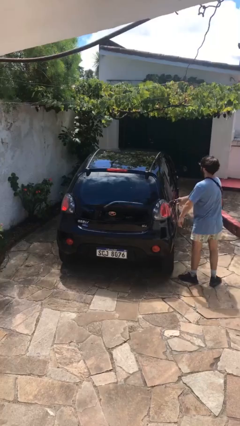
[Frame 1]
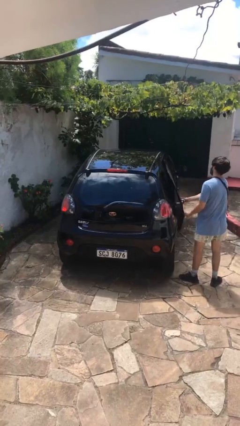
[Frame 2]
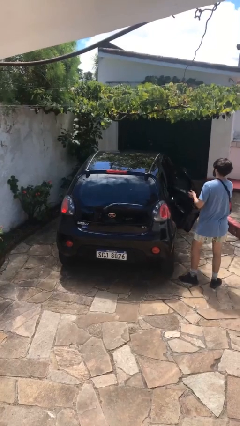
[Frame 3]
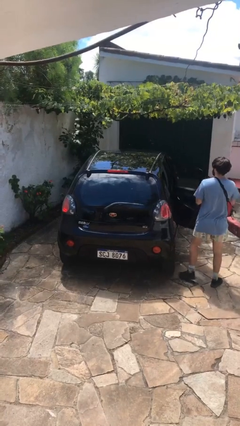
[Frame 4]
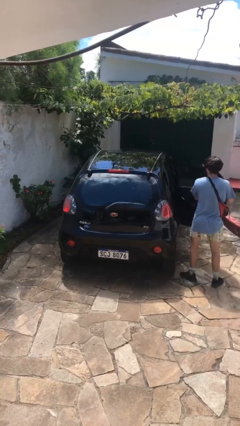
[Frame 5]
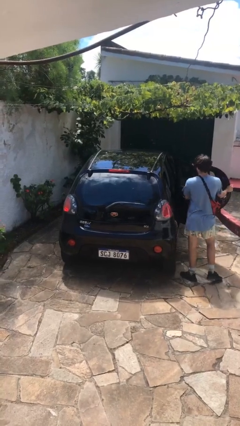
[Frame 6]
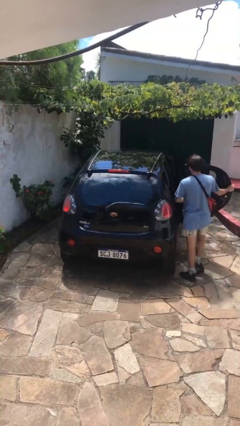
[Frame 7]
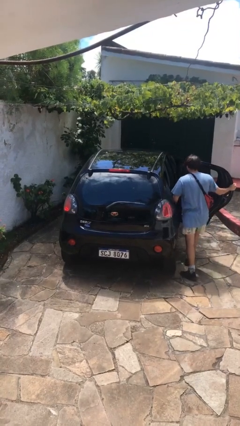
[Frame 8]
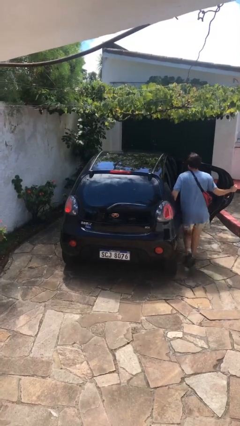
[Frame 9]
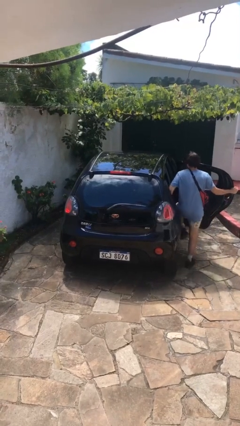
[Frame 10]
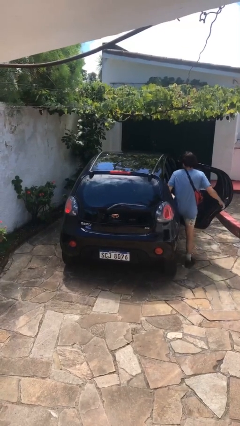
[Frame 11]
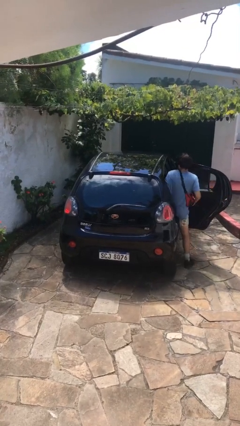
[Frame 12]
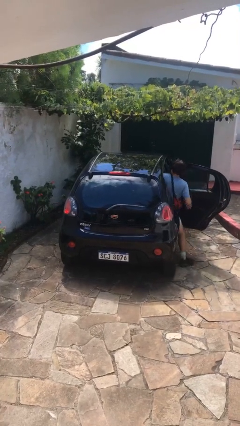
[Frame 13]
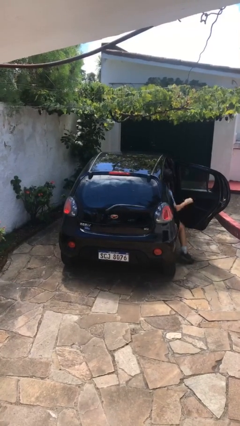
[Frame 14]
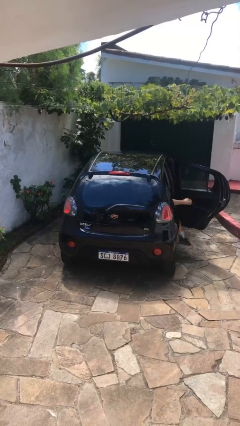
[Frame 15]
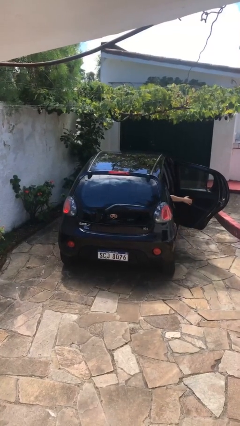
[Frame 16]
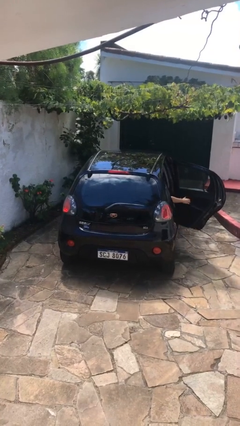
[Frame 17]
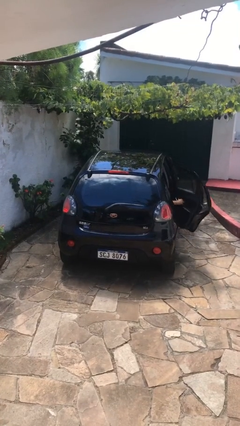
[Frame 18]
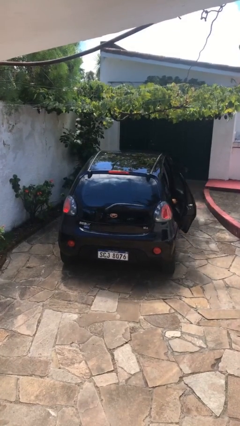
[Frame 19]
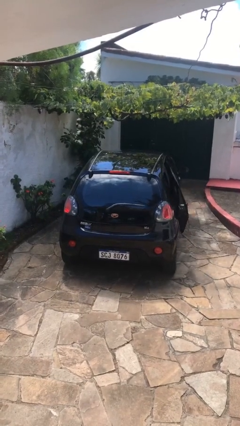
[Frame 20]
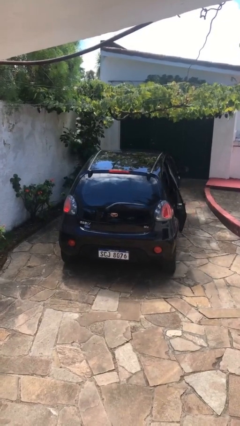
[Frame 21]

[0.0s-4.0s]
car picks up person

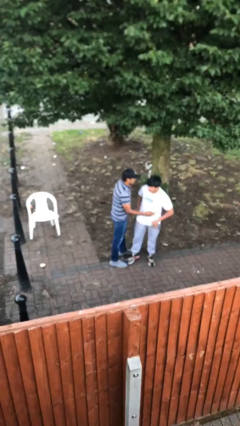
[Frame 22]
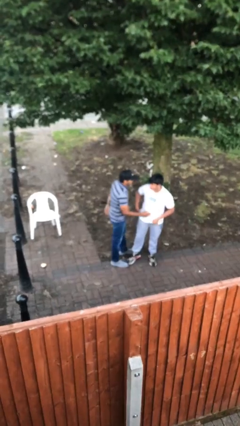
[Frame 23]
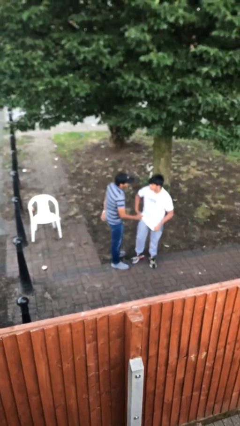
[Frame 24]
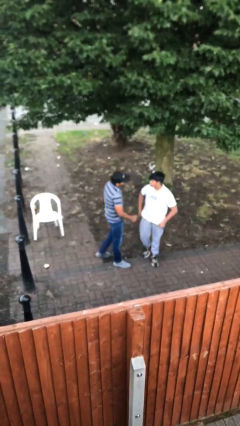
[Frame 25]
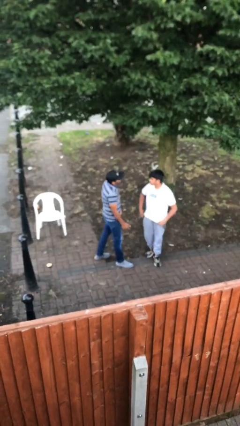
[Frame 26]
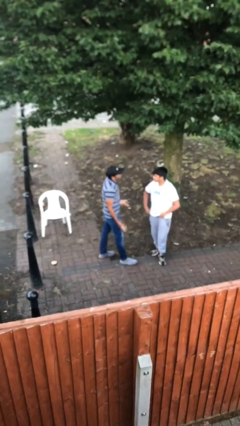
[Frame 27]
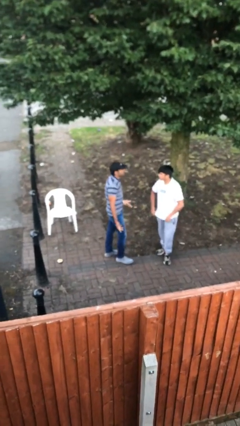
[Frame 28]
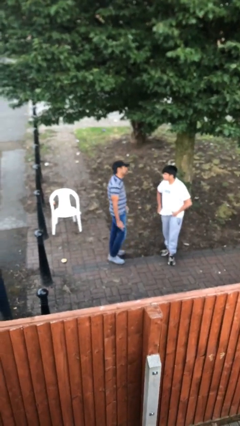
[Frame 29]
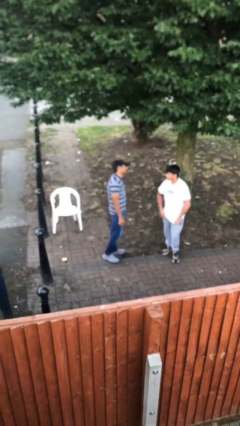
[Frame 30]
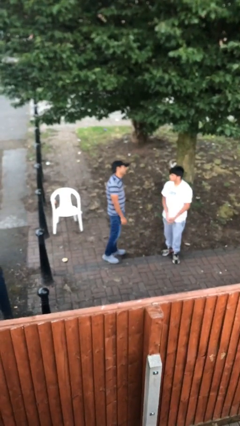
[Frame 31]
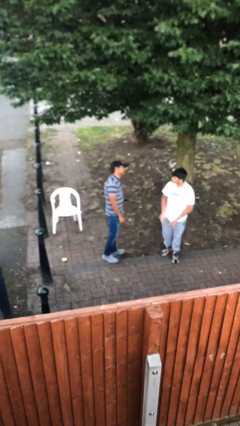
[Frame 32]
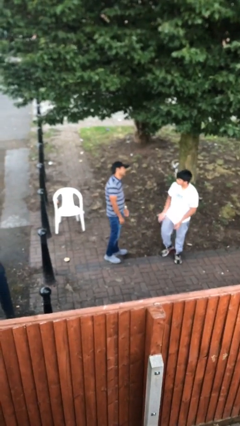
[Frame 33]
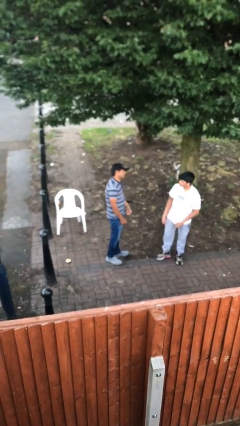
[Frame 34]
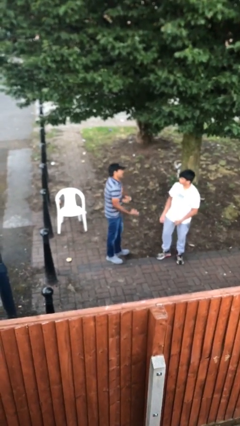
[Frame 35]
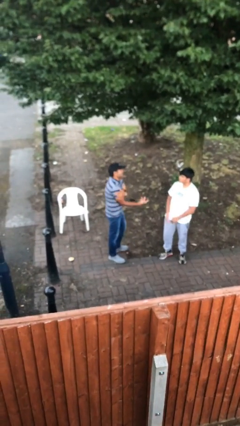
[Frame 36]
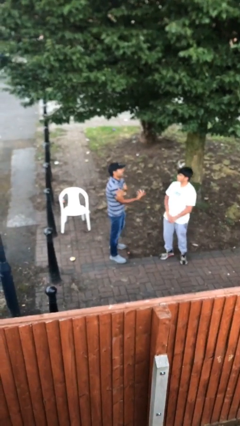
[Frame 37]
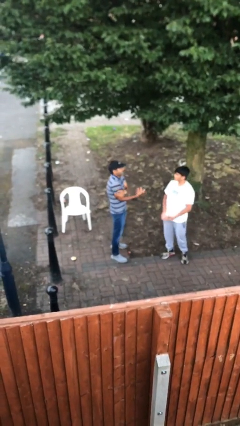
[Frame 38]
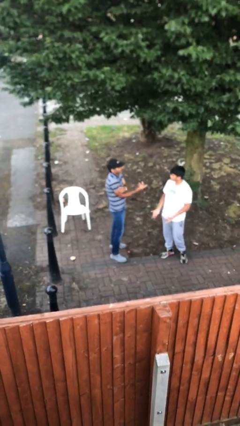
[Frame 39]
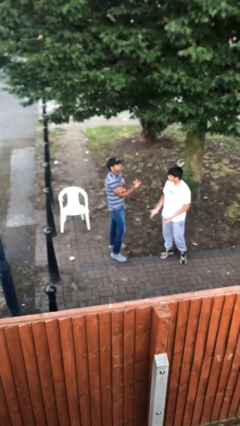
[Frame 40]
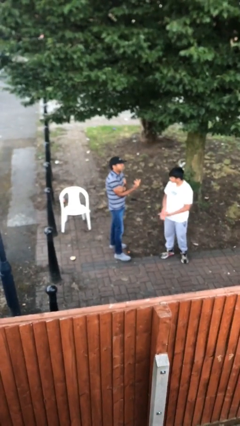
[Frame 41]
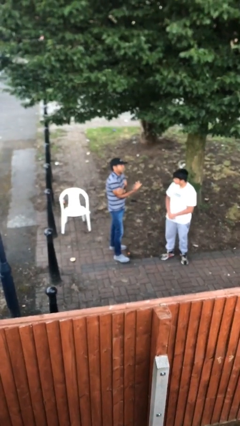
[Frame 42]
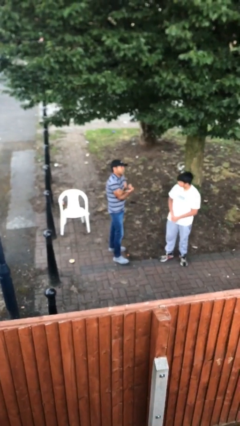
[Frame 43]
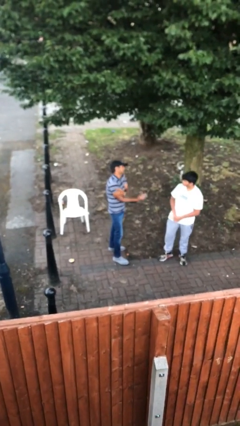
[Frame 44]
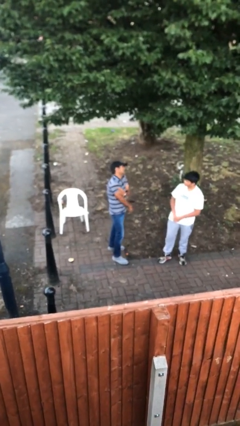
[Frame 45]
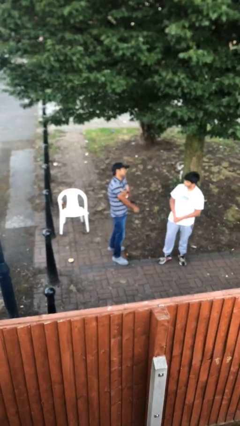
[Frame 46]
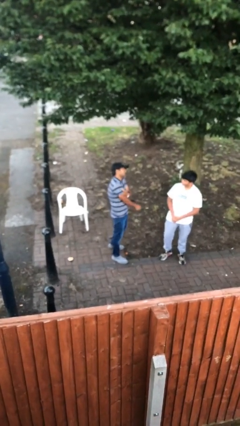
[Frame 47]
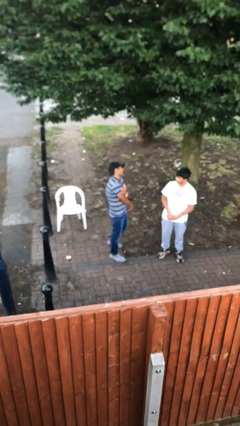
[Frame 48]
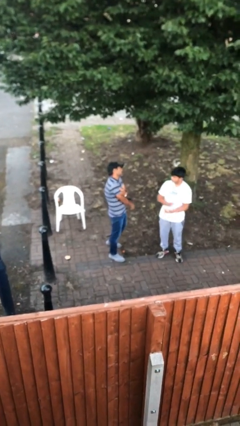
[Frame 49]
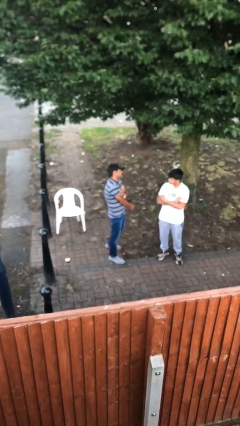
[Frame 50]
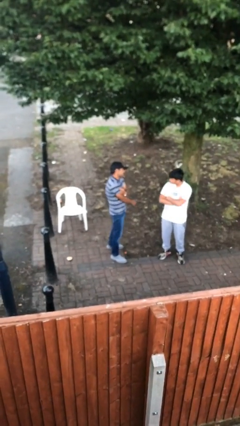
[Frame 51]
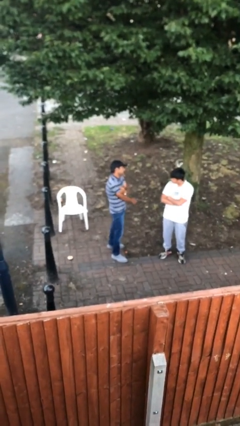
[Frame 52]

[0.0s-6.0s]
person talks to person

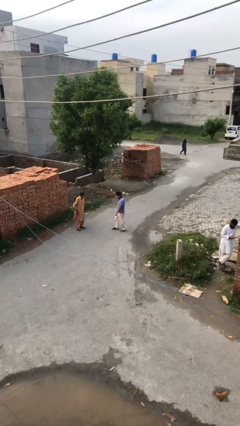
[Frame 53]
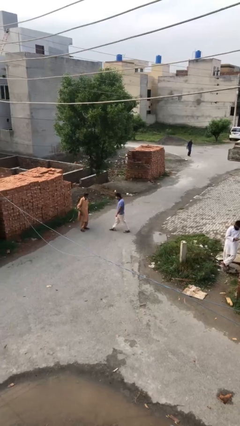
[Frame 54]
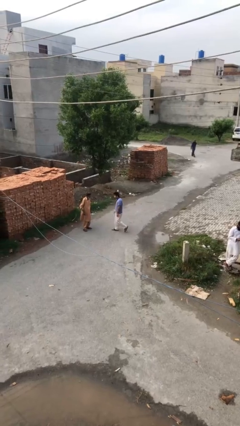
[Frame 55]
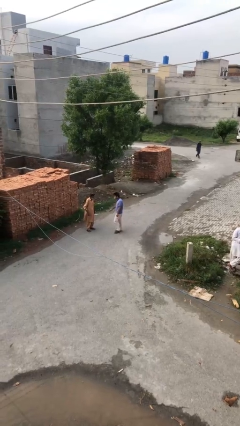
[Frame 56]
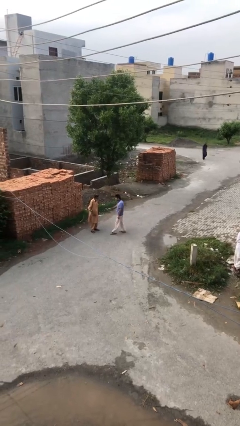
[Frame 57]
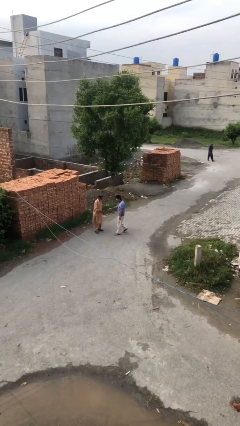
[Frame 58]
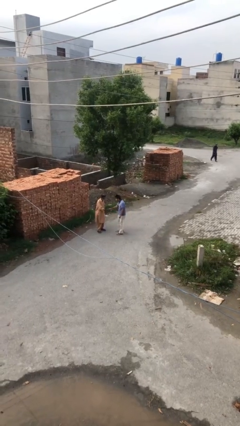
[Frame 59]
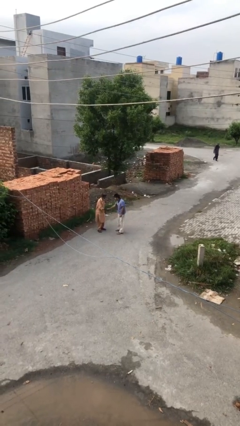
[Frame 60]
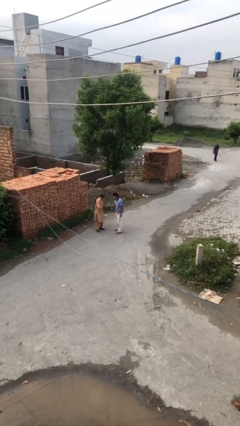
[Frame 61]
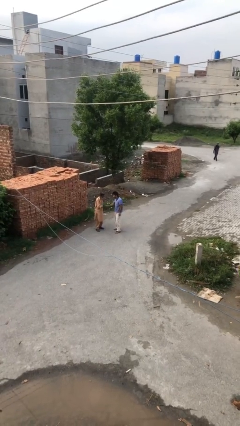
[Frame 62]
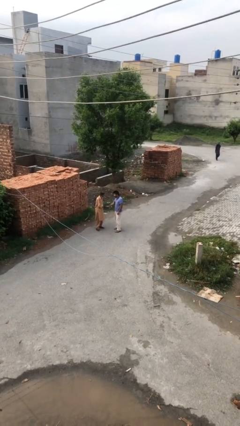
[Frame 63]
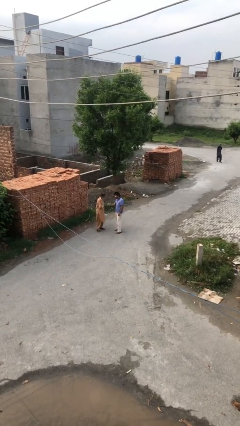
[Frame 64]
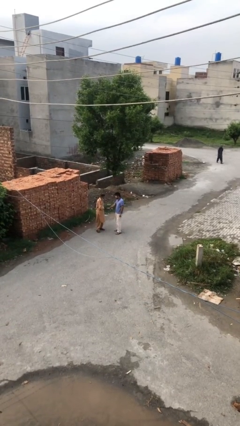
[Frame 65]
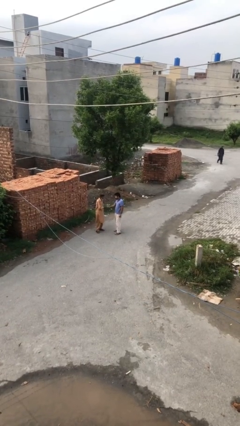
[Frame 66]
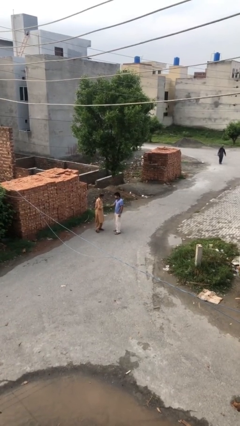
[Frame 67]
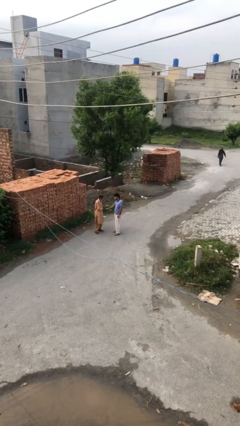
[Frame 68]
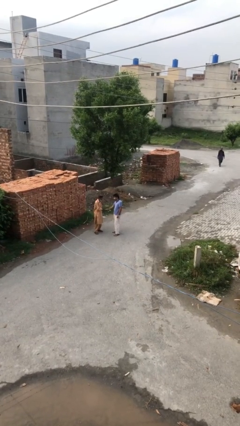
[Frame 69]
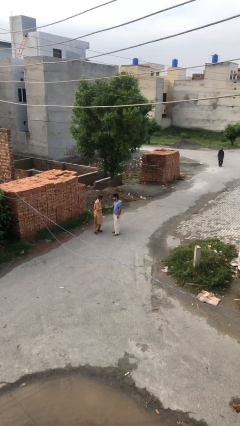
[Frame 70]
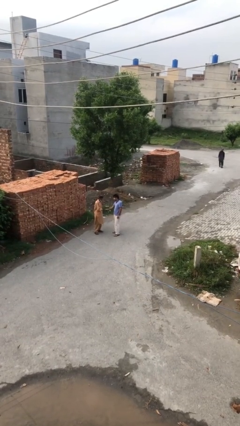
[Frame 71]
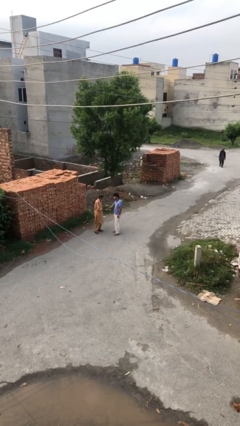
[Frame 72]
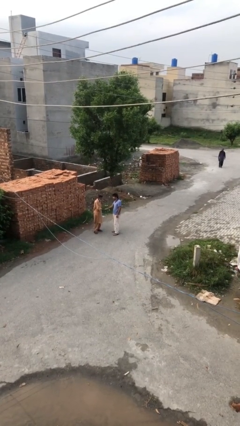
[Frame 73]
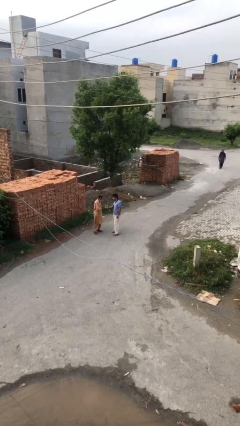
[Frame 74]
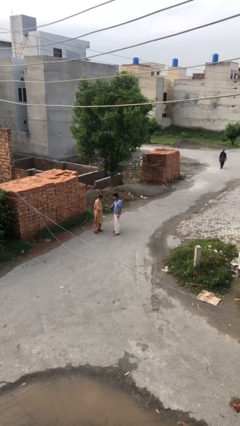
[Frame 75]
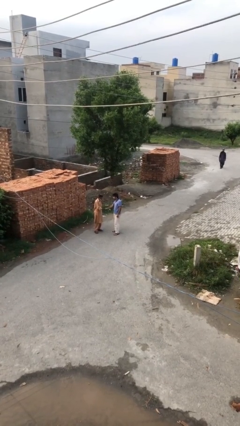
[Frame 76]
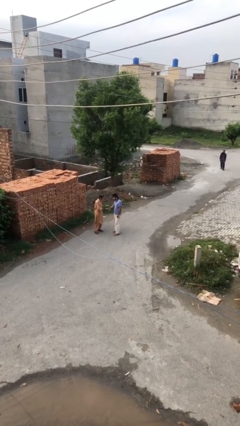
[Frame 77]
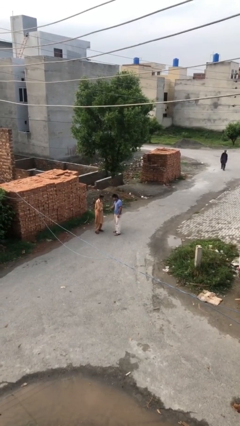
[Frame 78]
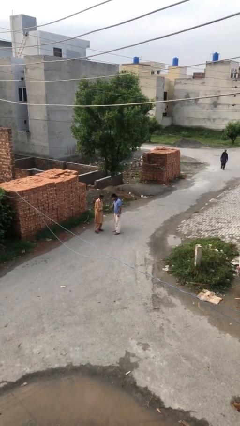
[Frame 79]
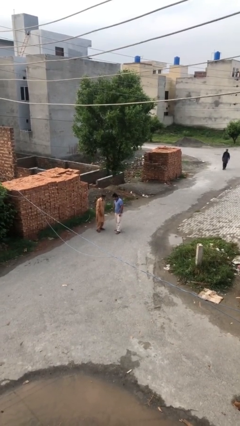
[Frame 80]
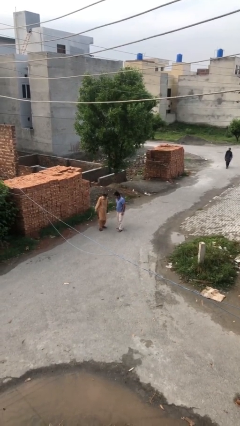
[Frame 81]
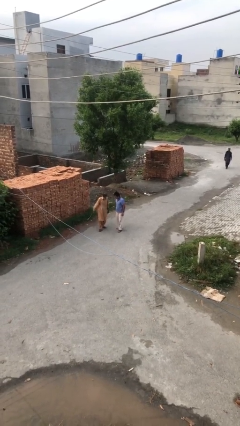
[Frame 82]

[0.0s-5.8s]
person shakes hand

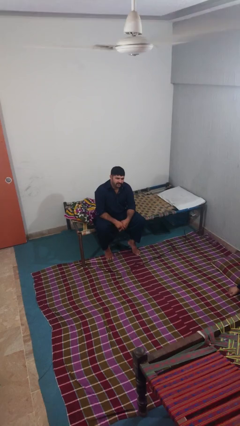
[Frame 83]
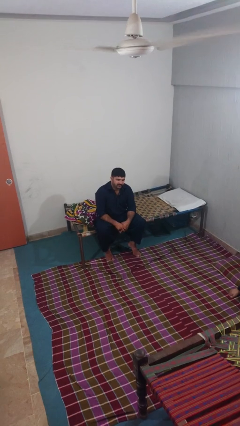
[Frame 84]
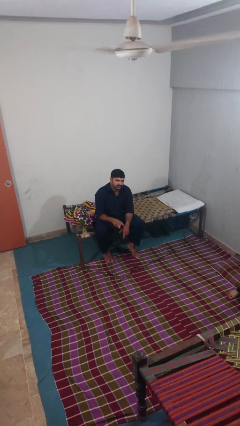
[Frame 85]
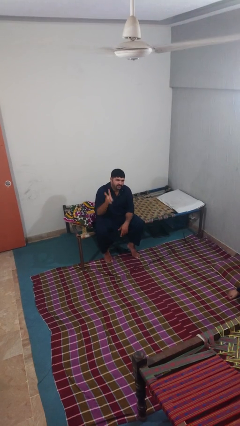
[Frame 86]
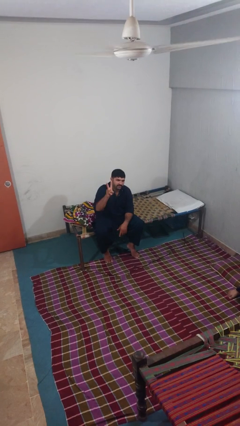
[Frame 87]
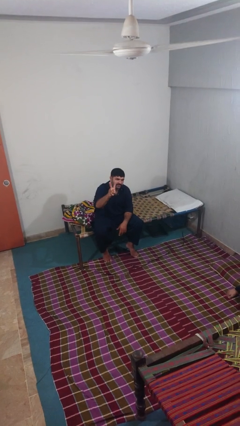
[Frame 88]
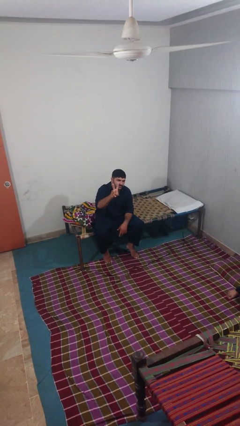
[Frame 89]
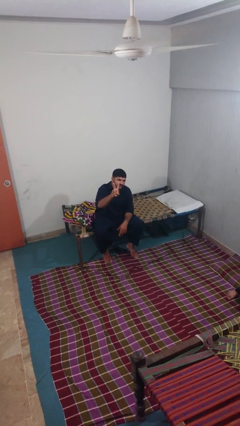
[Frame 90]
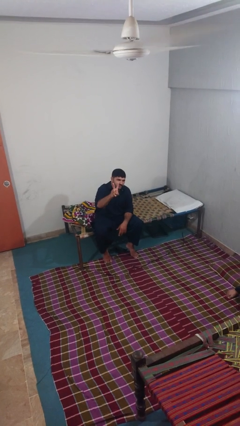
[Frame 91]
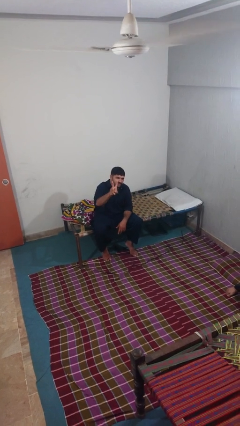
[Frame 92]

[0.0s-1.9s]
person gestures peace
